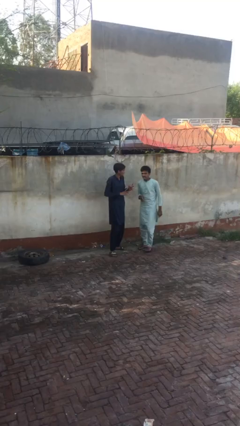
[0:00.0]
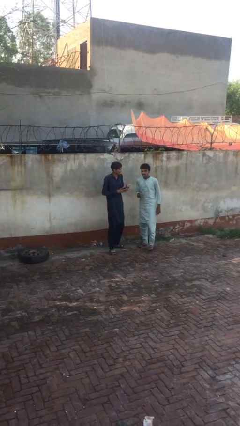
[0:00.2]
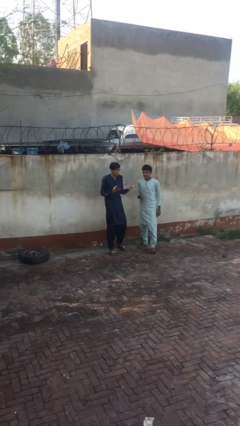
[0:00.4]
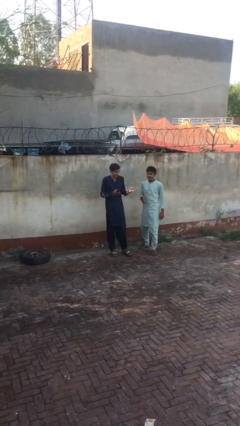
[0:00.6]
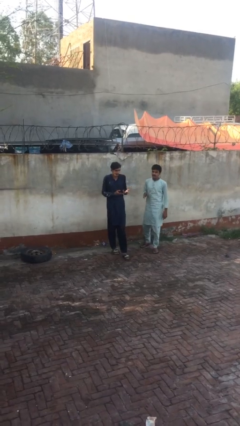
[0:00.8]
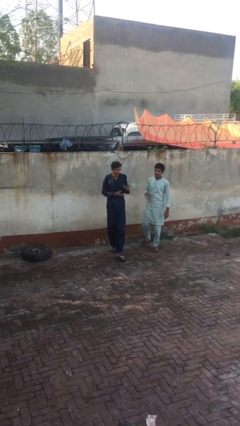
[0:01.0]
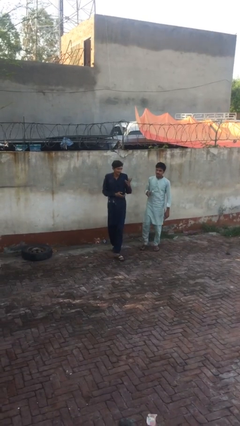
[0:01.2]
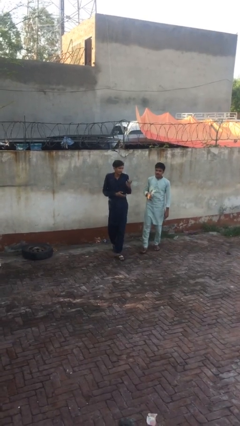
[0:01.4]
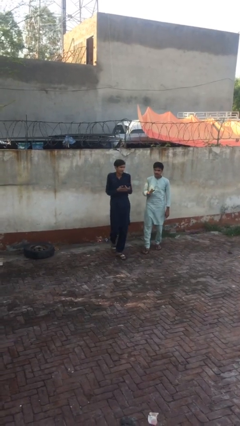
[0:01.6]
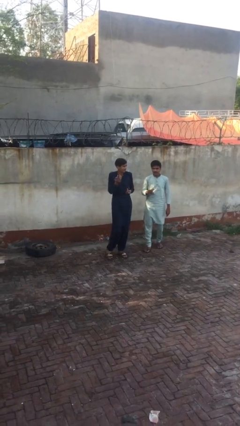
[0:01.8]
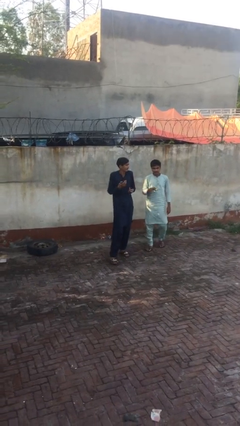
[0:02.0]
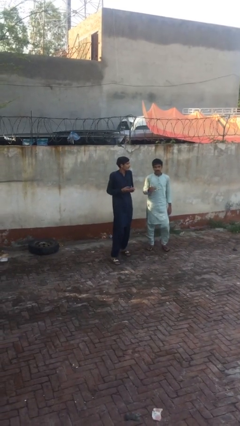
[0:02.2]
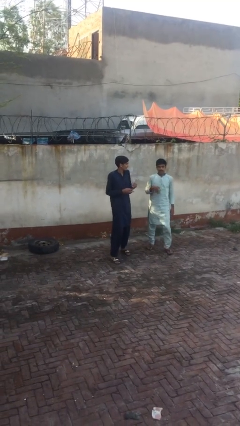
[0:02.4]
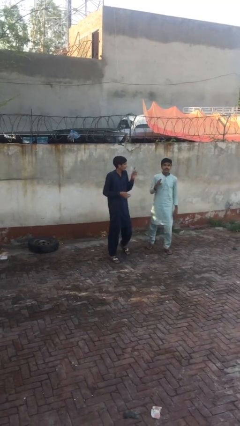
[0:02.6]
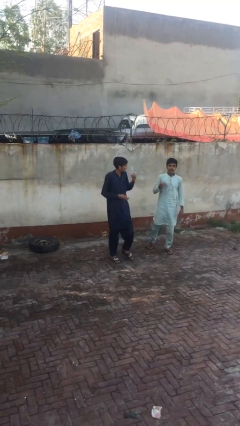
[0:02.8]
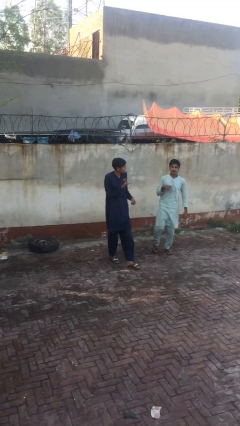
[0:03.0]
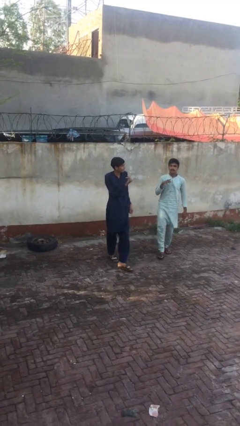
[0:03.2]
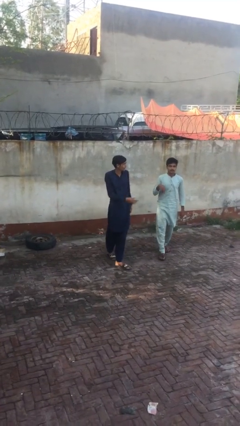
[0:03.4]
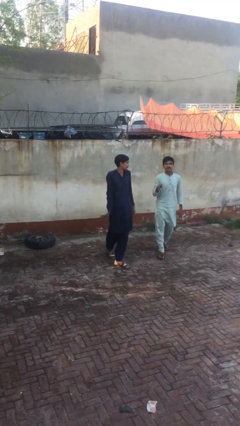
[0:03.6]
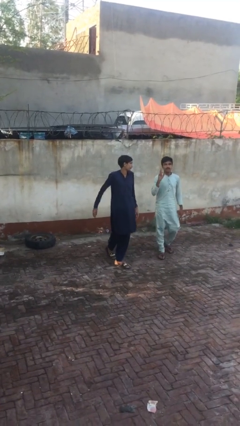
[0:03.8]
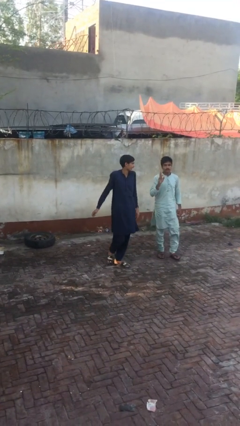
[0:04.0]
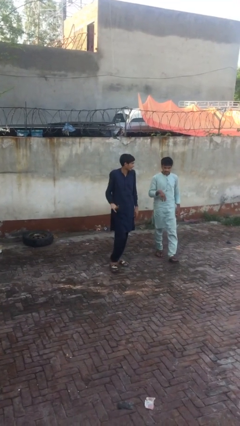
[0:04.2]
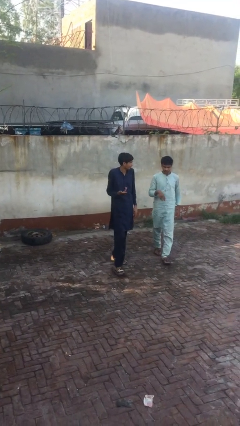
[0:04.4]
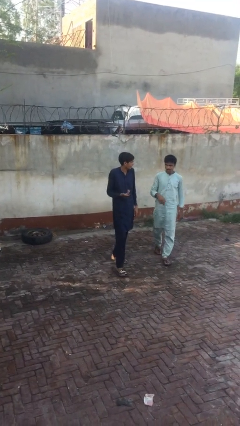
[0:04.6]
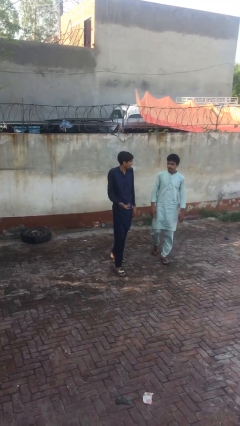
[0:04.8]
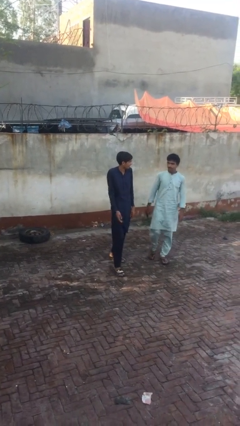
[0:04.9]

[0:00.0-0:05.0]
person talks to person

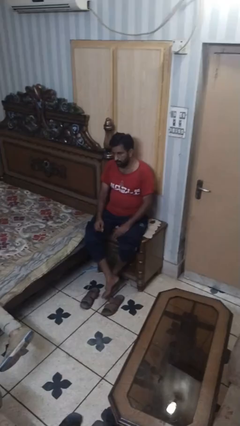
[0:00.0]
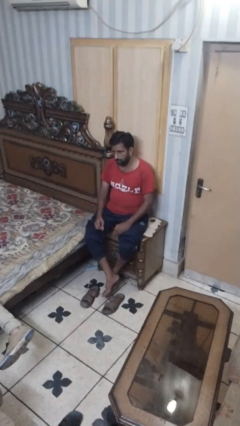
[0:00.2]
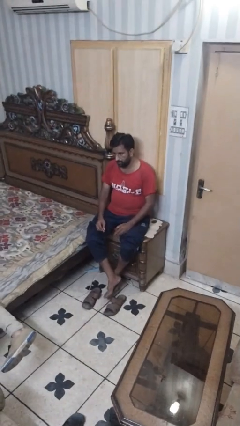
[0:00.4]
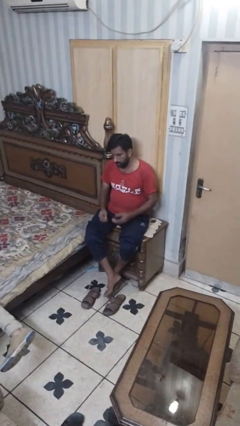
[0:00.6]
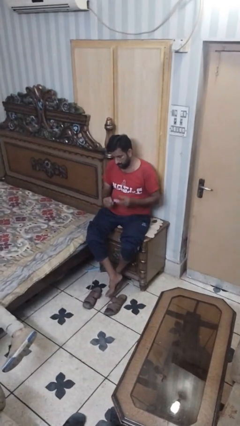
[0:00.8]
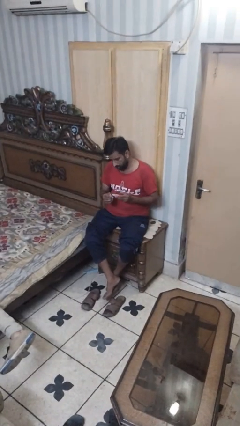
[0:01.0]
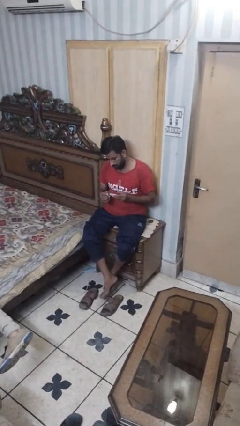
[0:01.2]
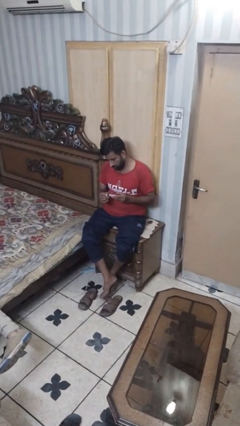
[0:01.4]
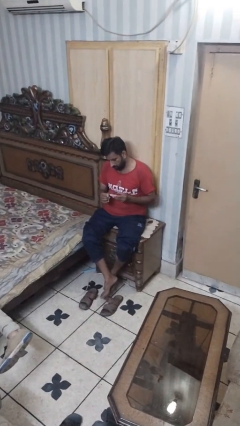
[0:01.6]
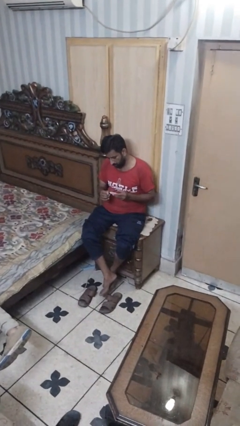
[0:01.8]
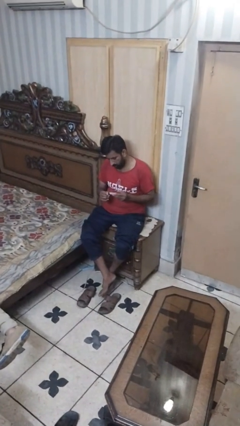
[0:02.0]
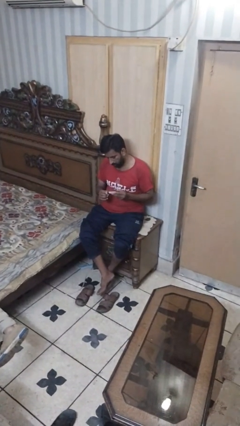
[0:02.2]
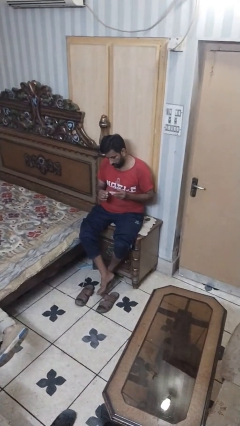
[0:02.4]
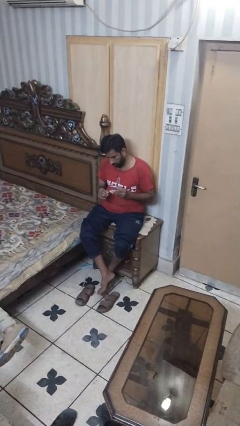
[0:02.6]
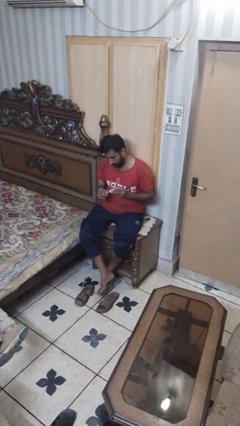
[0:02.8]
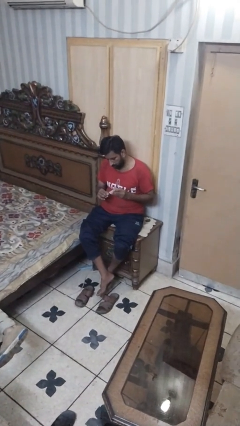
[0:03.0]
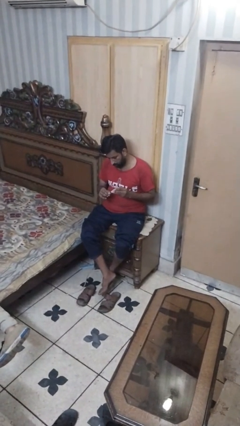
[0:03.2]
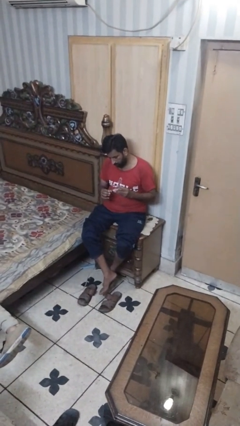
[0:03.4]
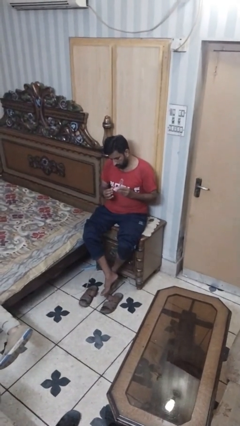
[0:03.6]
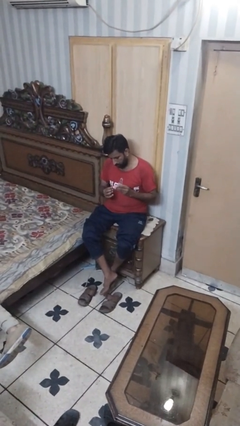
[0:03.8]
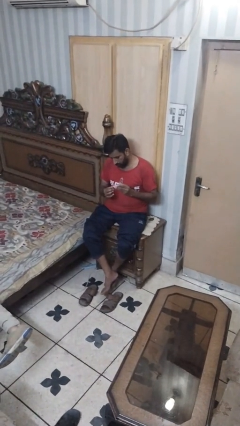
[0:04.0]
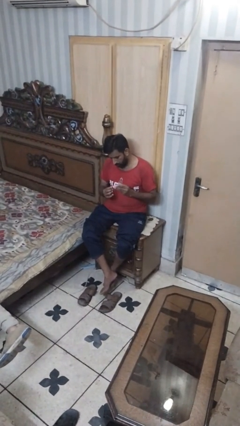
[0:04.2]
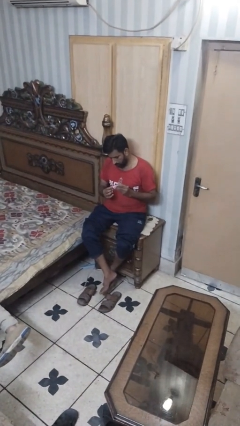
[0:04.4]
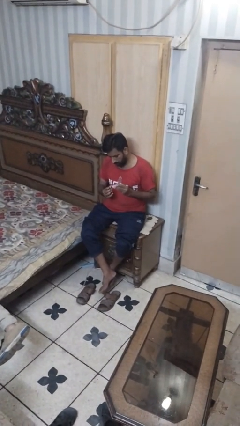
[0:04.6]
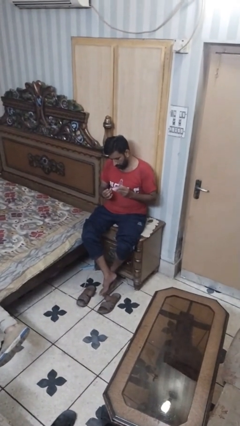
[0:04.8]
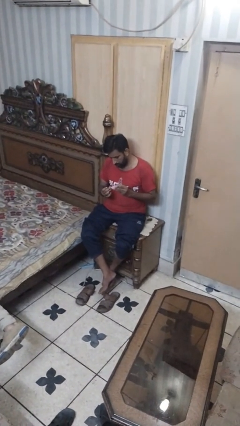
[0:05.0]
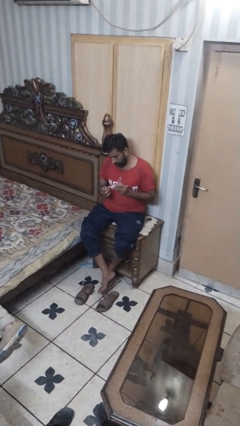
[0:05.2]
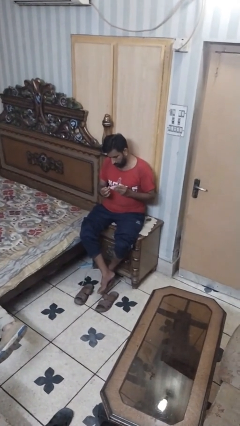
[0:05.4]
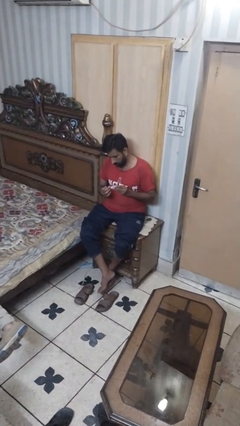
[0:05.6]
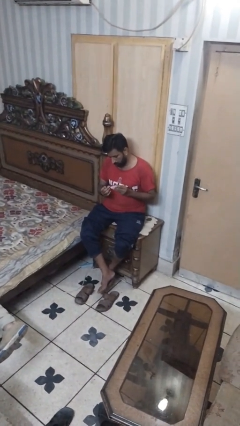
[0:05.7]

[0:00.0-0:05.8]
person clips fingernails

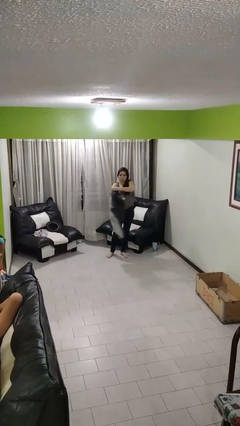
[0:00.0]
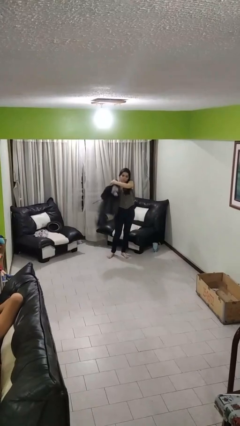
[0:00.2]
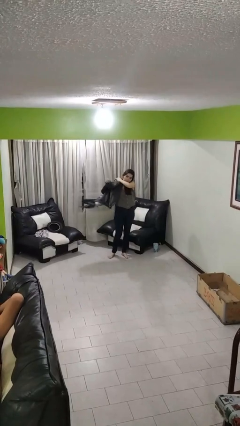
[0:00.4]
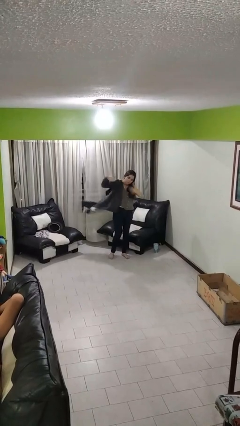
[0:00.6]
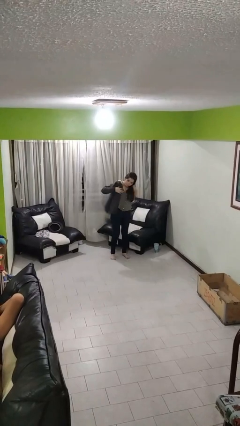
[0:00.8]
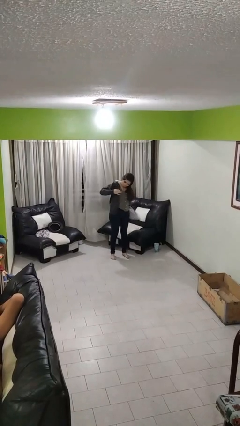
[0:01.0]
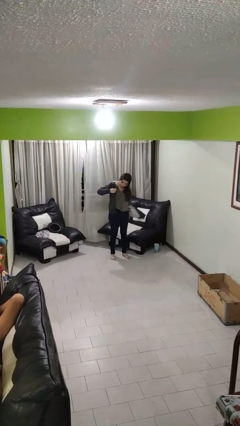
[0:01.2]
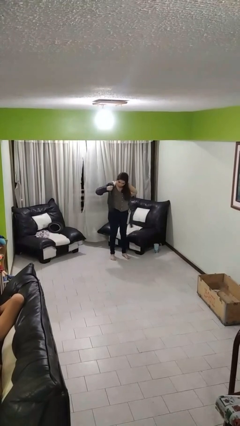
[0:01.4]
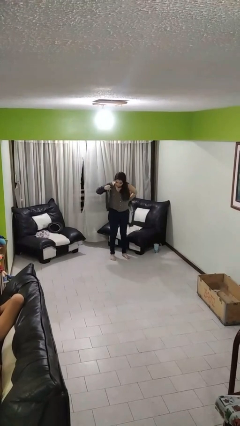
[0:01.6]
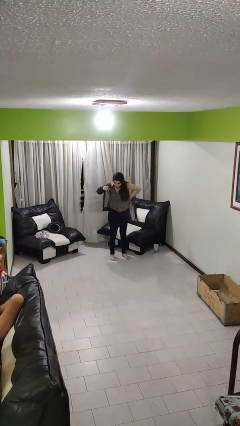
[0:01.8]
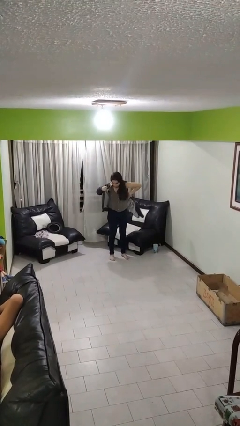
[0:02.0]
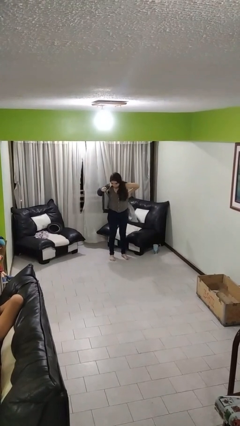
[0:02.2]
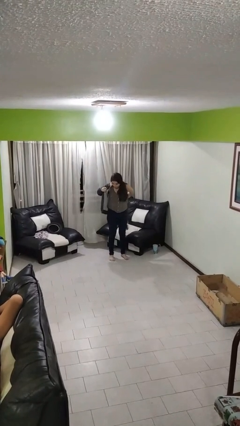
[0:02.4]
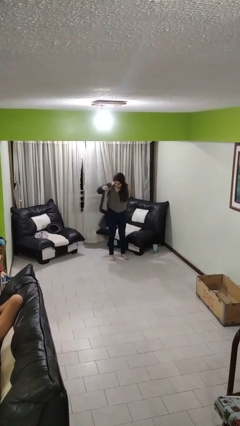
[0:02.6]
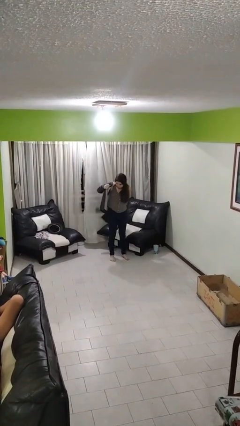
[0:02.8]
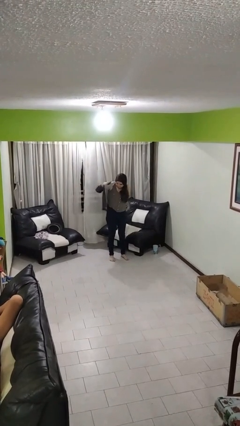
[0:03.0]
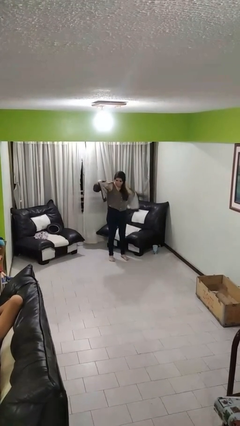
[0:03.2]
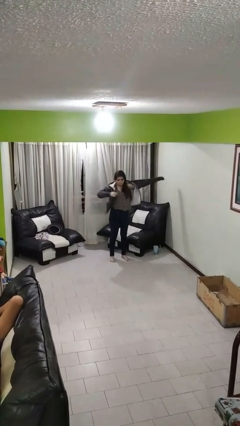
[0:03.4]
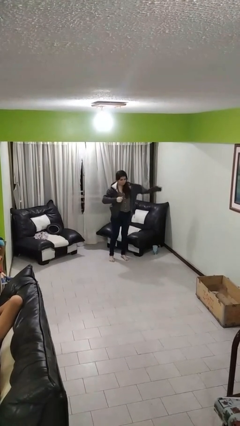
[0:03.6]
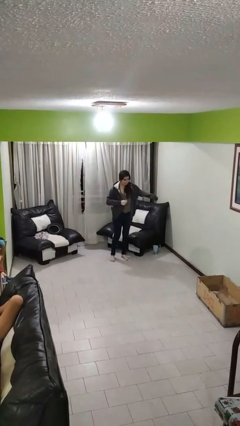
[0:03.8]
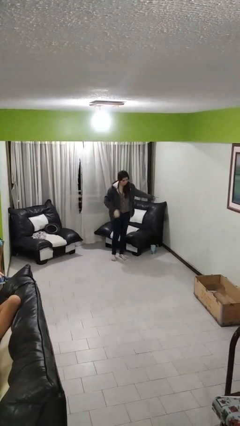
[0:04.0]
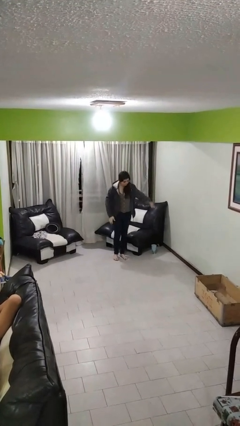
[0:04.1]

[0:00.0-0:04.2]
person puts on jacket

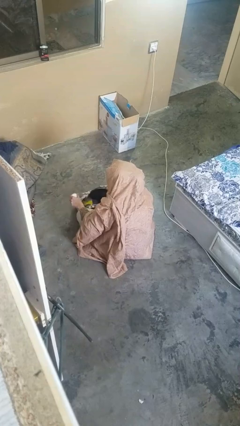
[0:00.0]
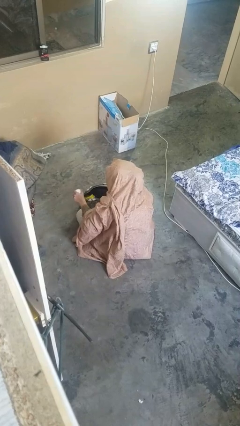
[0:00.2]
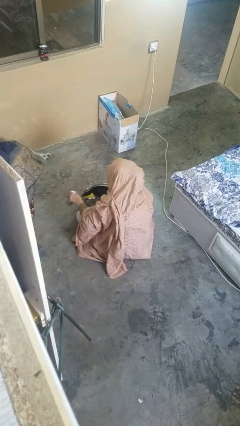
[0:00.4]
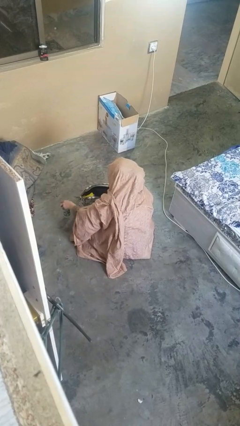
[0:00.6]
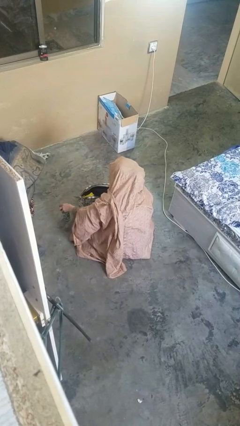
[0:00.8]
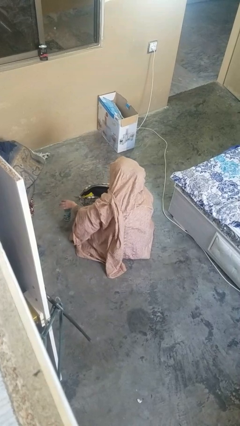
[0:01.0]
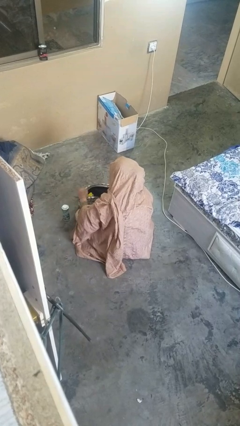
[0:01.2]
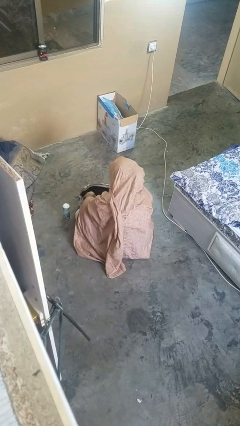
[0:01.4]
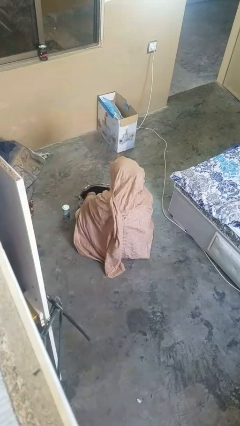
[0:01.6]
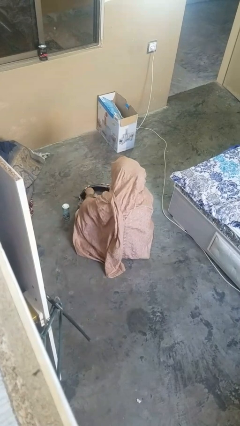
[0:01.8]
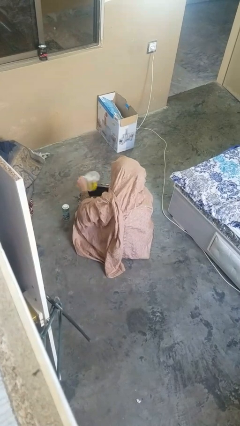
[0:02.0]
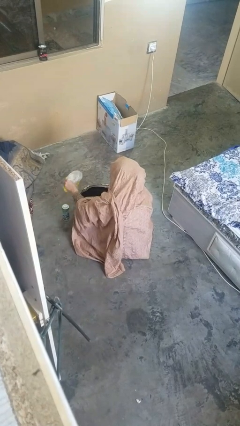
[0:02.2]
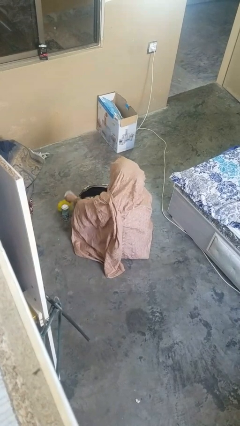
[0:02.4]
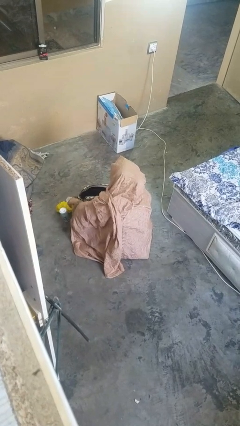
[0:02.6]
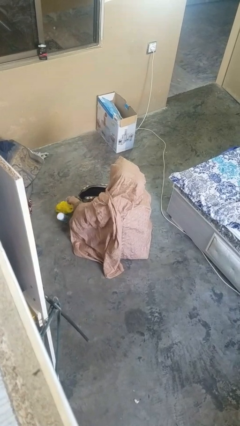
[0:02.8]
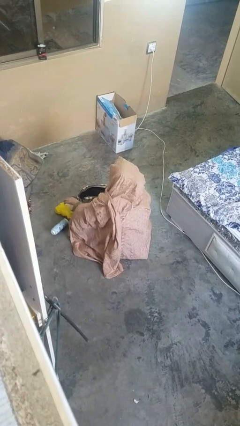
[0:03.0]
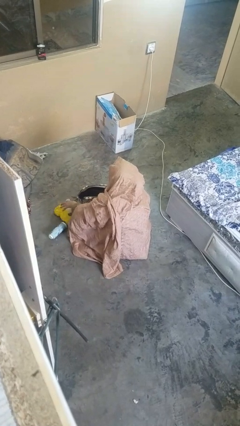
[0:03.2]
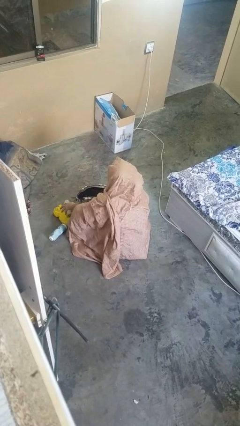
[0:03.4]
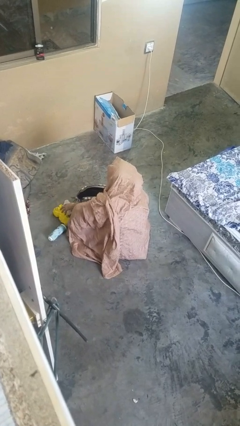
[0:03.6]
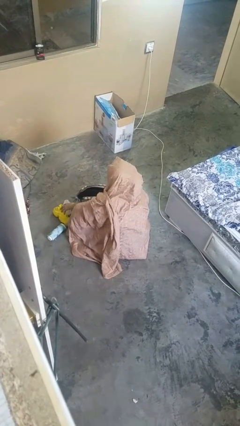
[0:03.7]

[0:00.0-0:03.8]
person takes object from purse
